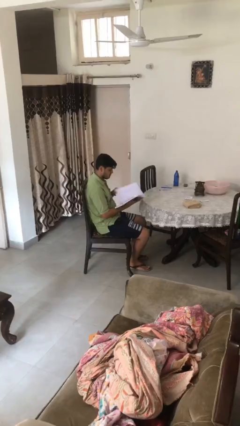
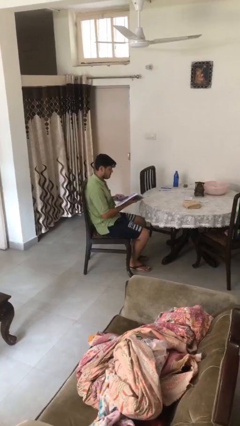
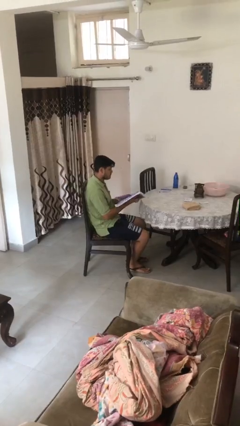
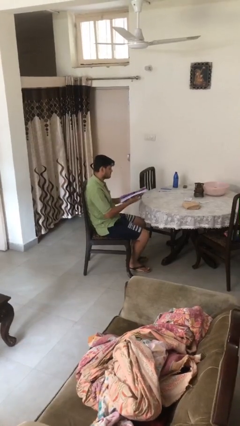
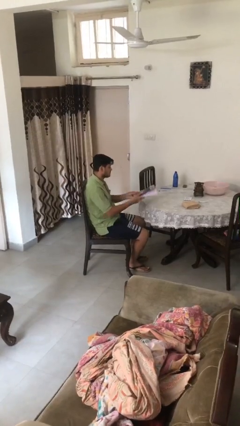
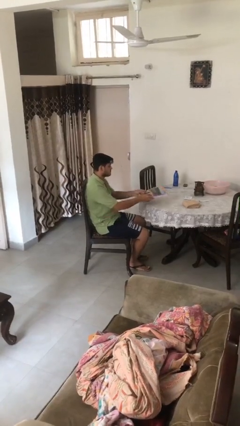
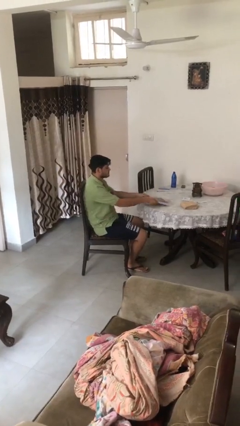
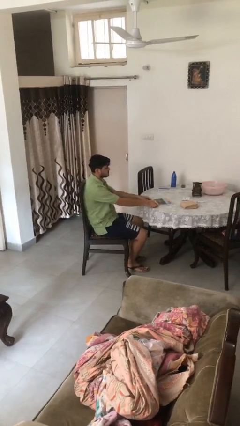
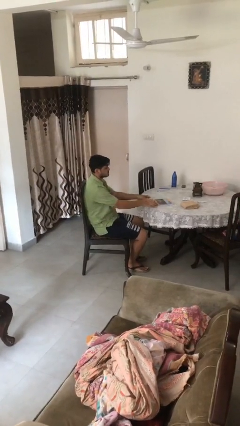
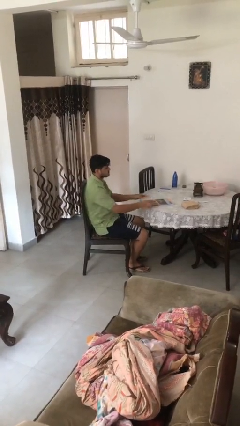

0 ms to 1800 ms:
person puts down object on table

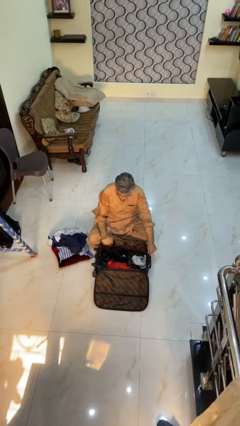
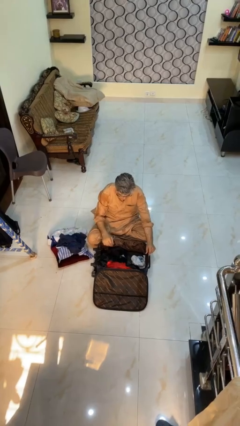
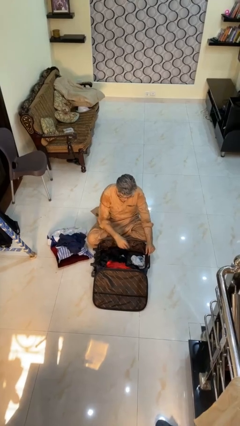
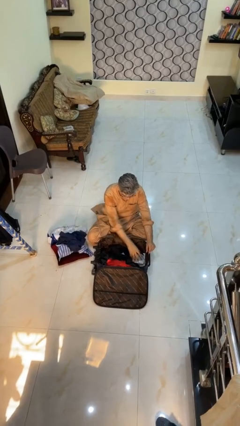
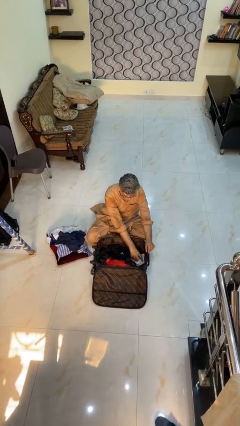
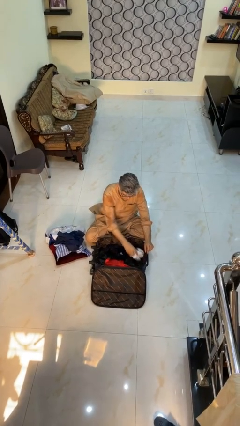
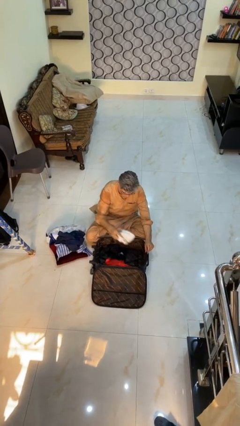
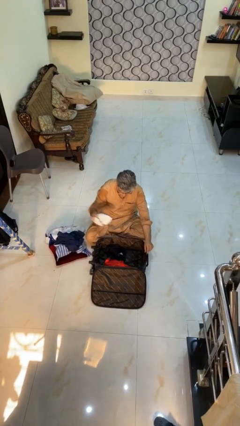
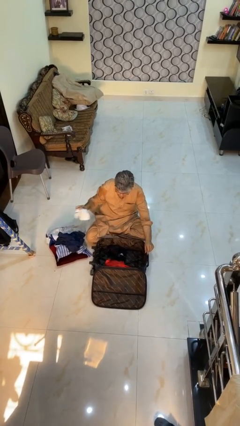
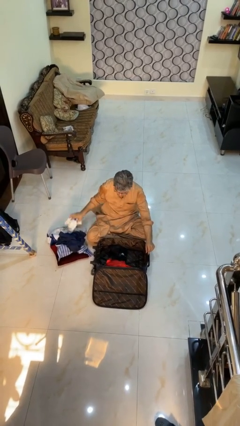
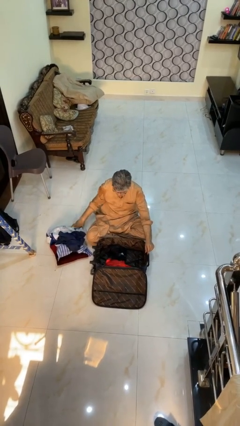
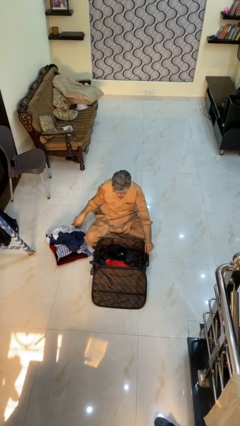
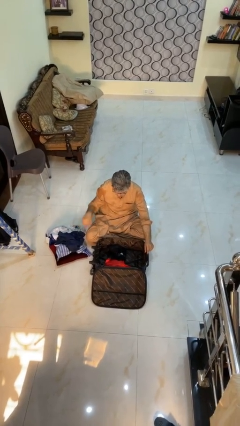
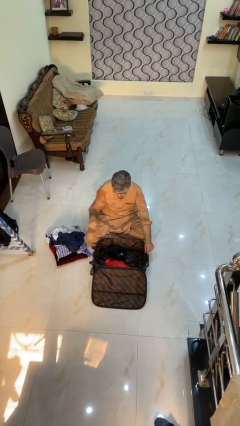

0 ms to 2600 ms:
person unloads clothes from suitcase

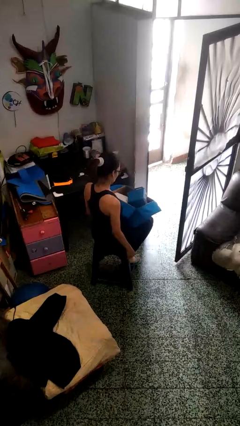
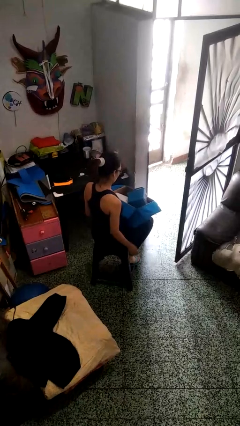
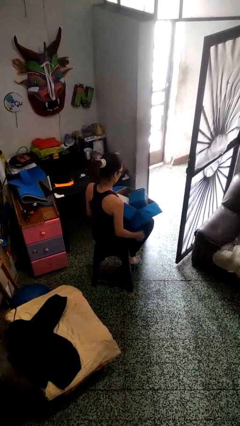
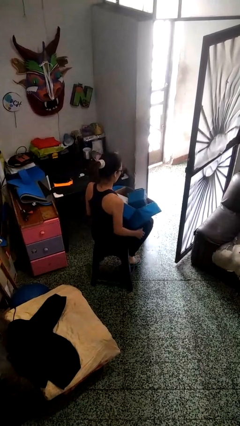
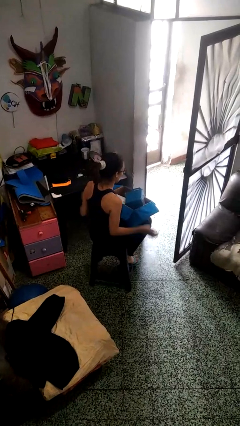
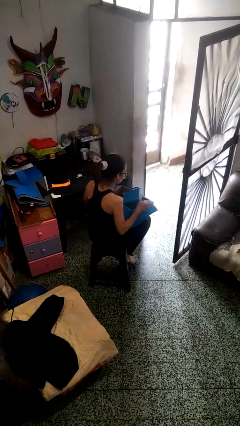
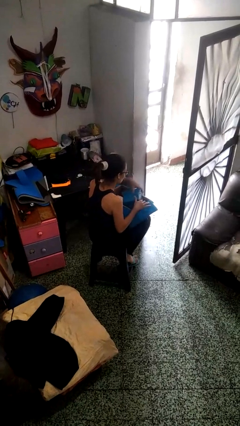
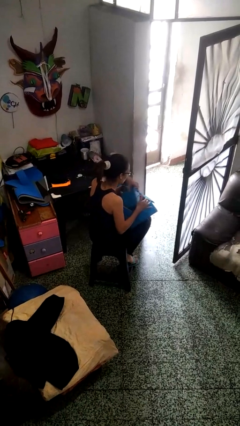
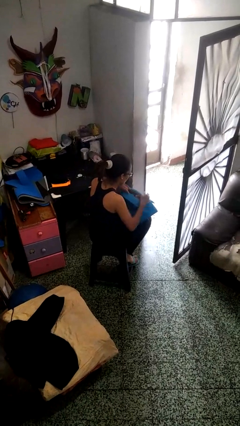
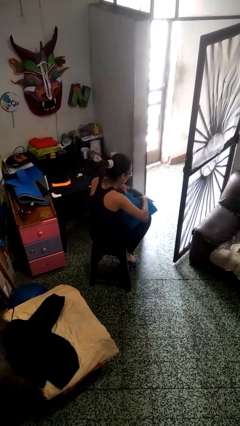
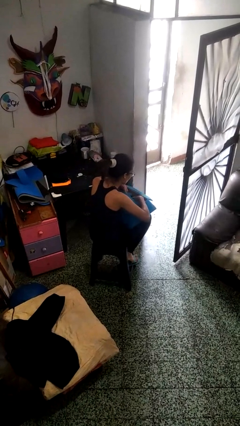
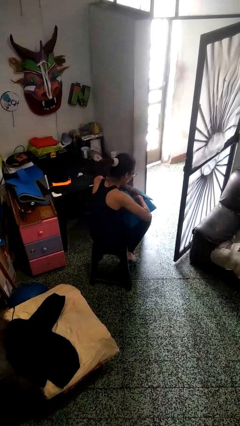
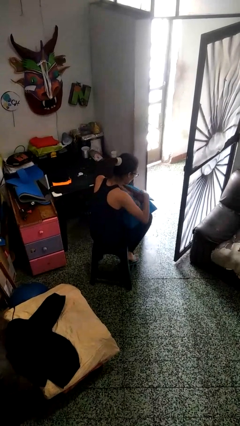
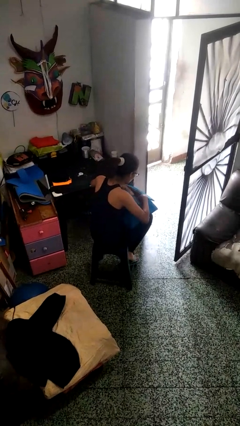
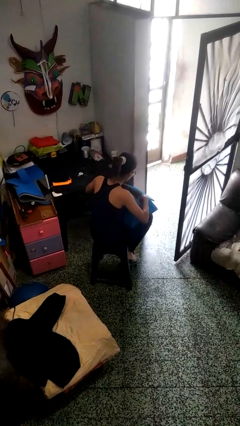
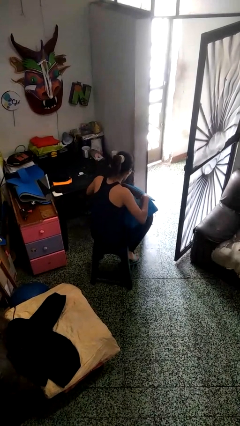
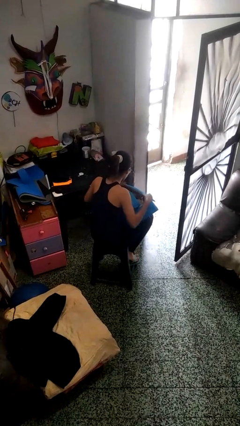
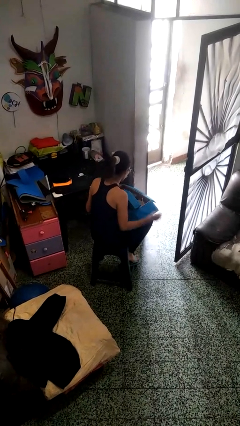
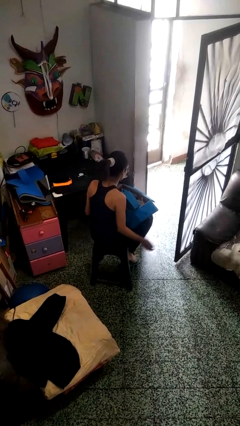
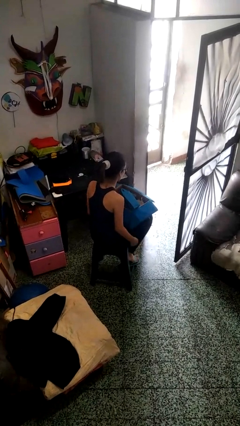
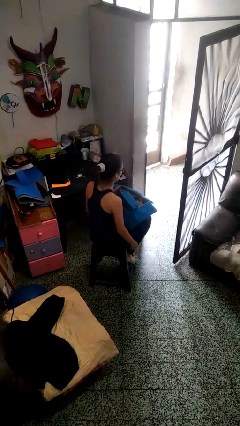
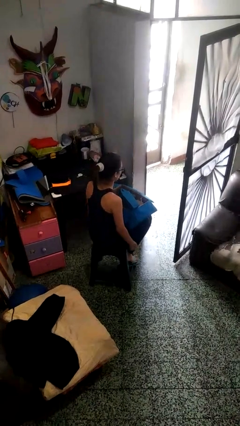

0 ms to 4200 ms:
person searches in box

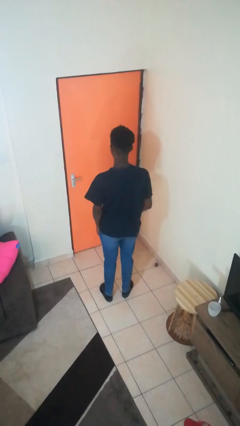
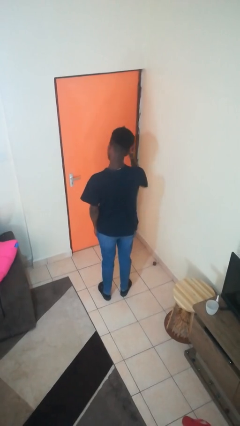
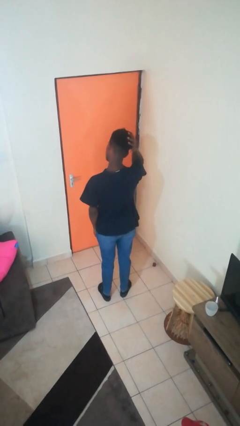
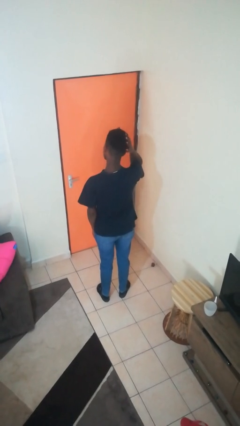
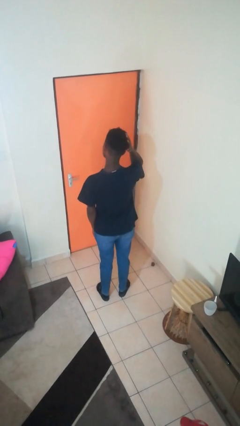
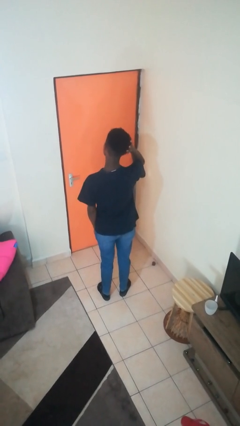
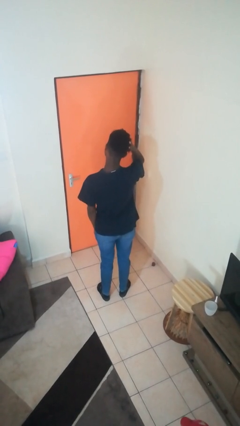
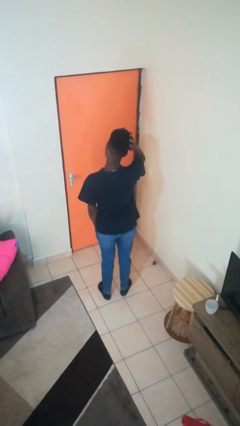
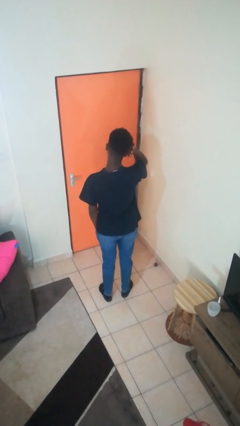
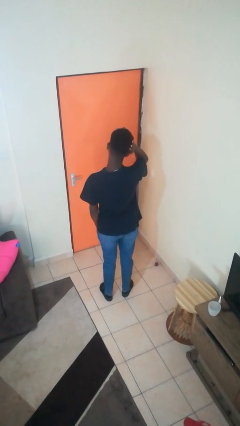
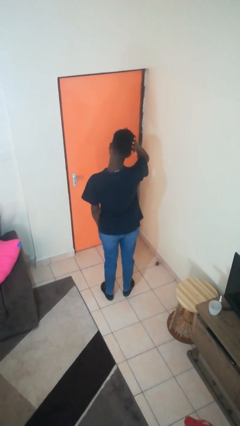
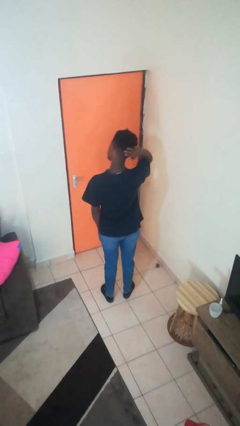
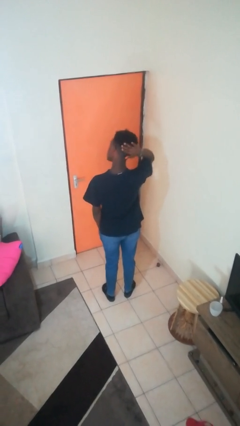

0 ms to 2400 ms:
person strokes hair

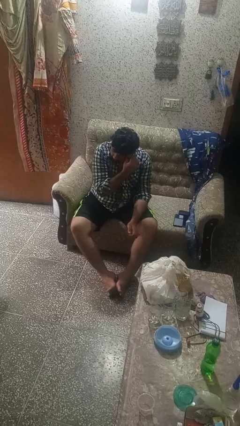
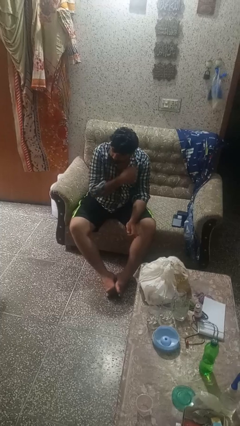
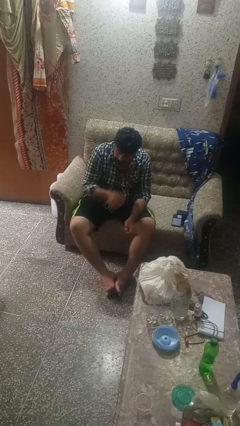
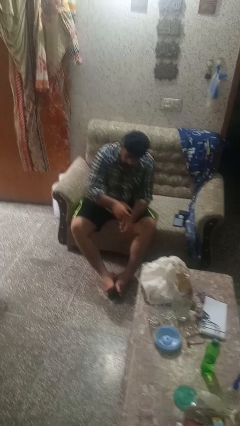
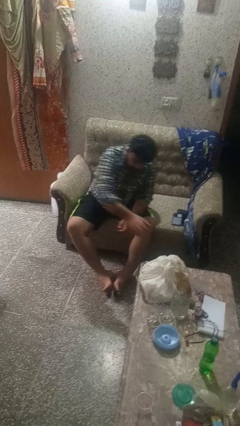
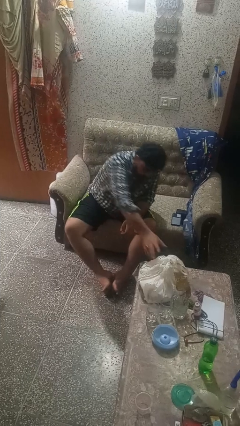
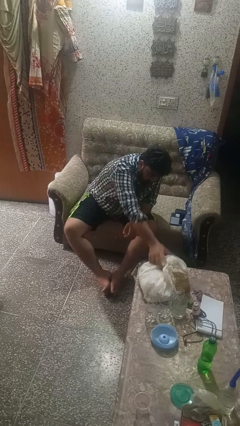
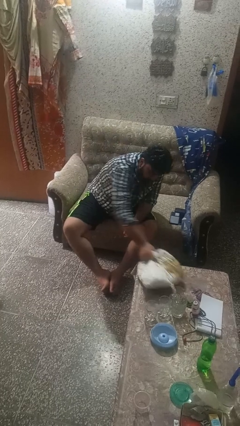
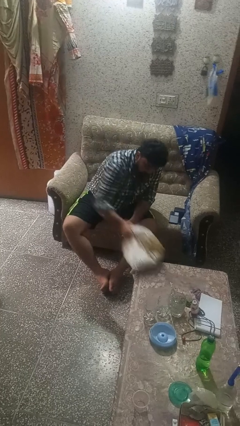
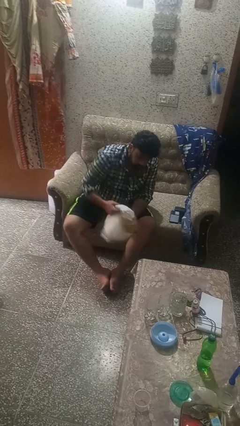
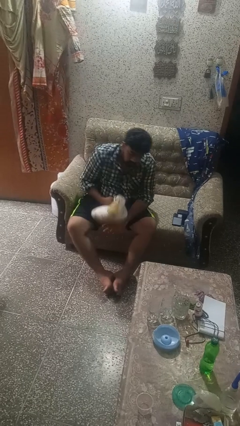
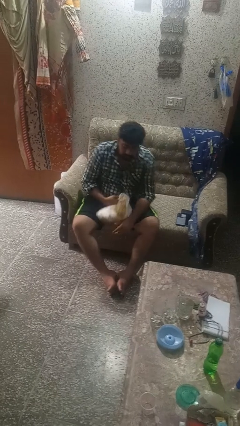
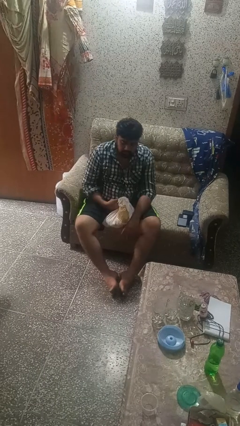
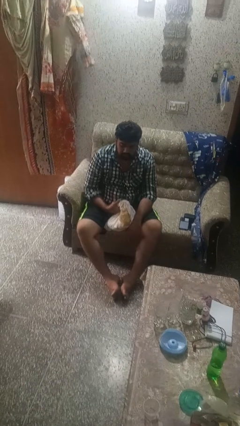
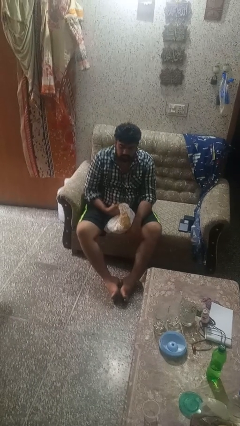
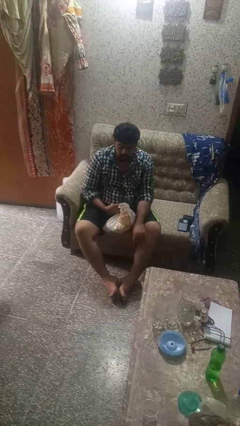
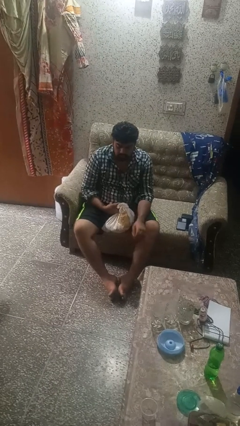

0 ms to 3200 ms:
person picks up object from table

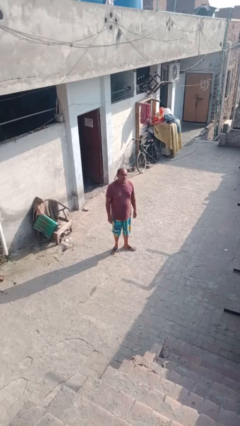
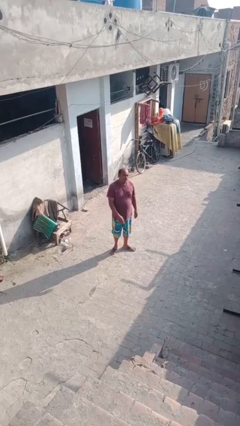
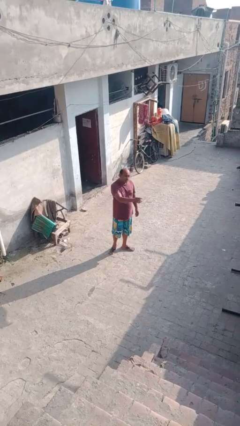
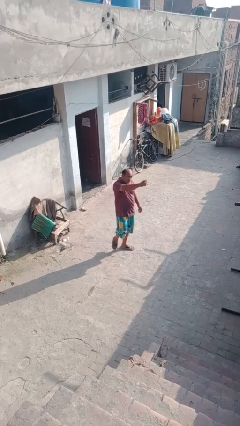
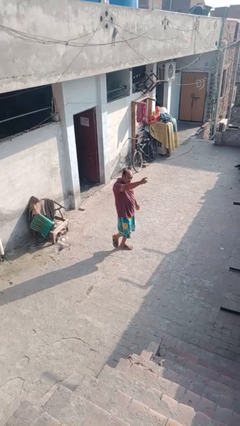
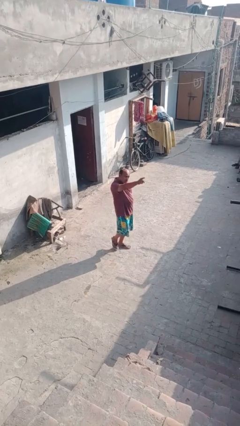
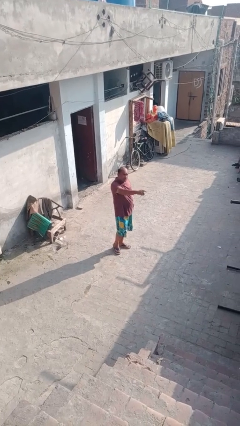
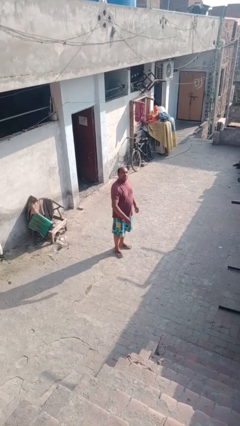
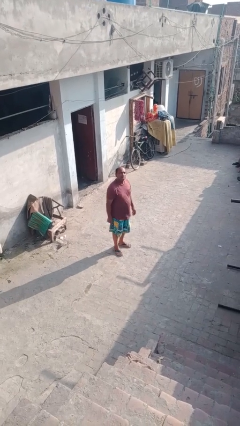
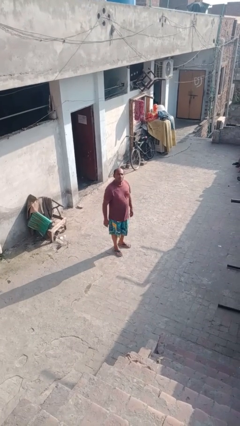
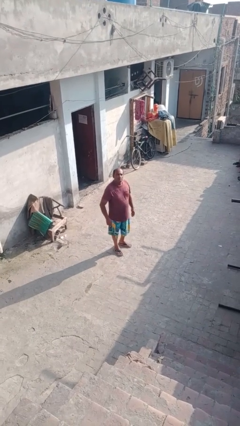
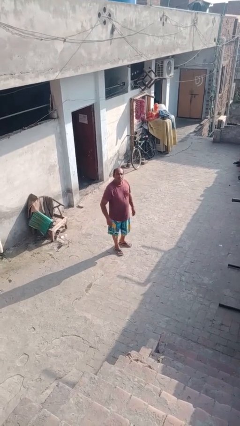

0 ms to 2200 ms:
person points at person

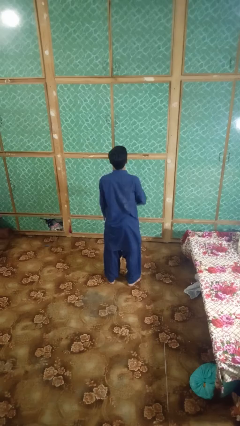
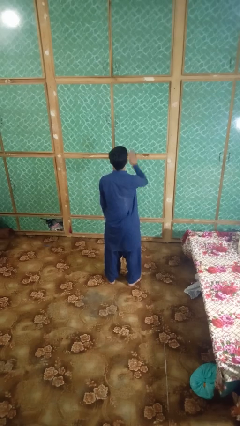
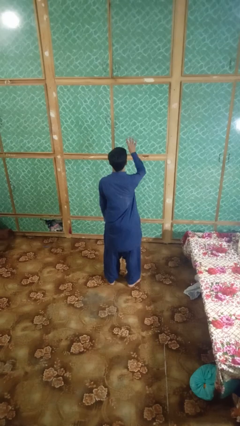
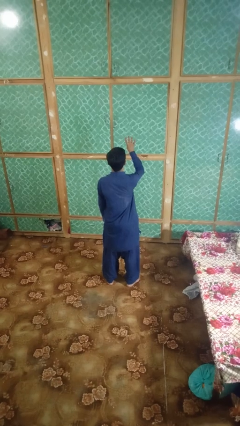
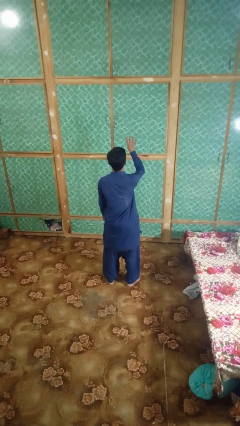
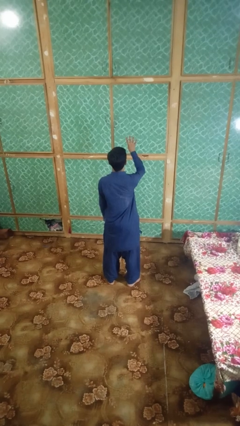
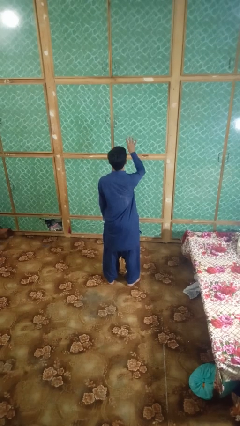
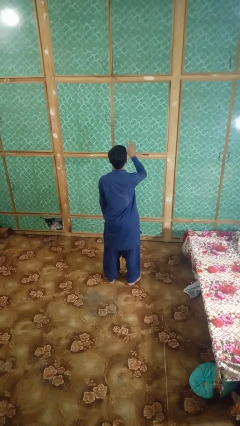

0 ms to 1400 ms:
person gestures number four
